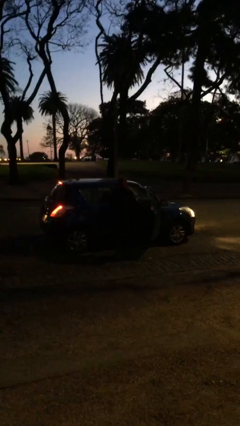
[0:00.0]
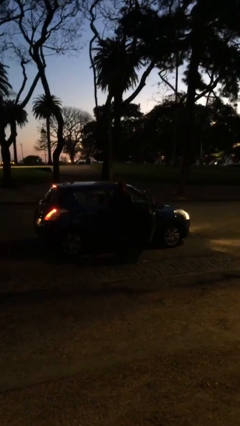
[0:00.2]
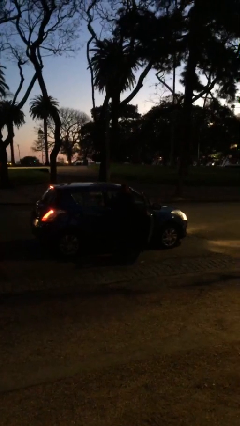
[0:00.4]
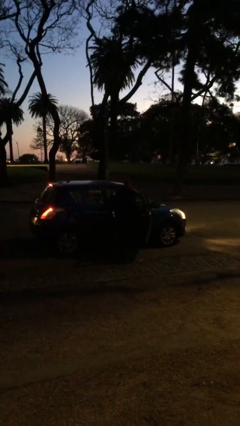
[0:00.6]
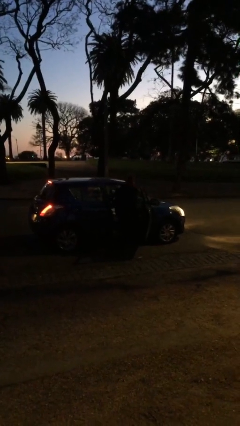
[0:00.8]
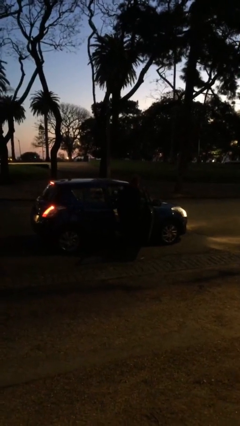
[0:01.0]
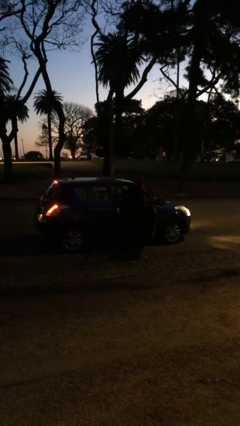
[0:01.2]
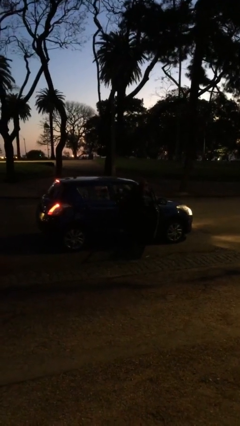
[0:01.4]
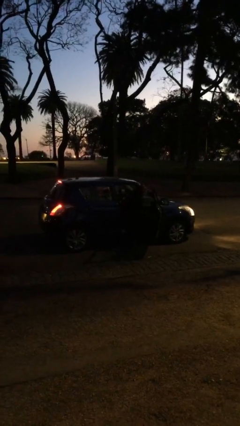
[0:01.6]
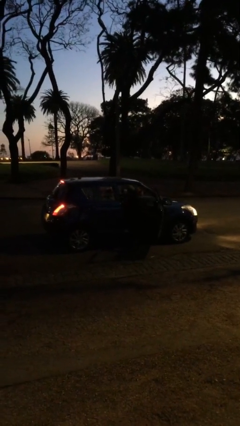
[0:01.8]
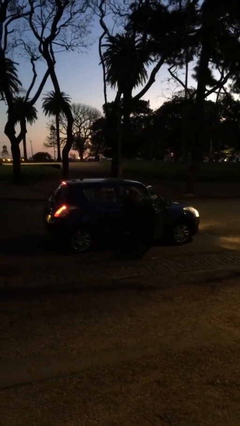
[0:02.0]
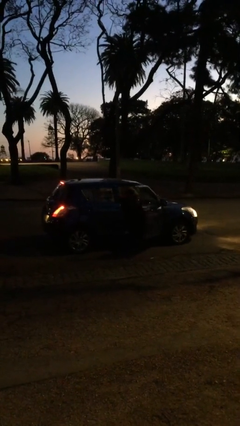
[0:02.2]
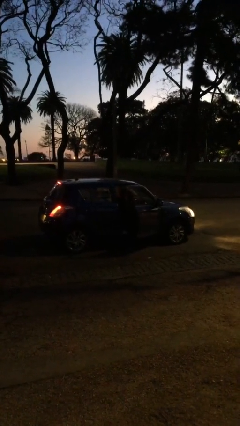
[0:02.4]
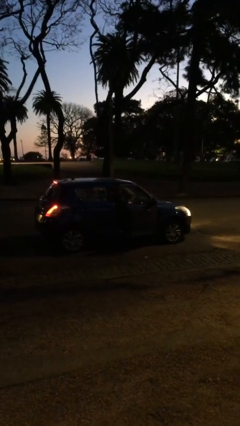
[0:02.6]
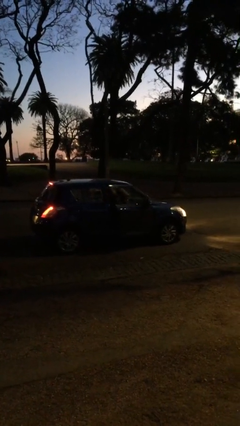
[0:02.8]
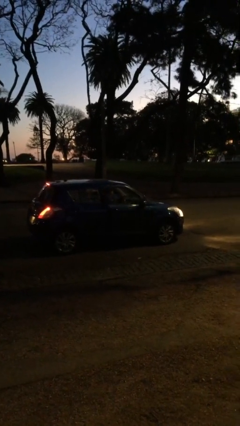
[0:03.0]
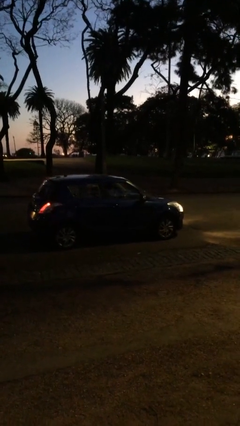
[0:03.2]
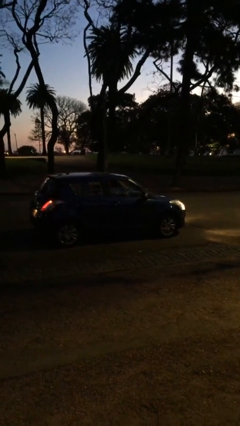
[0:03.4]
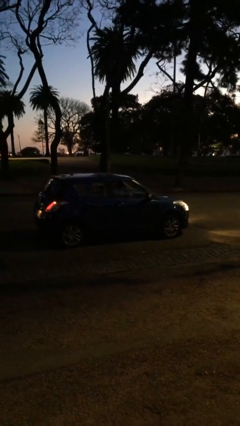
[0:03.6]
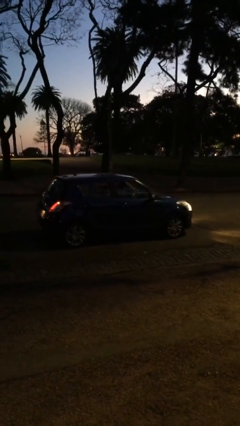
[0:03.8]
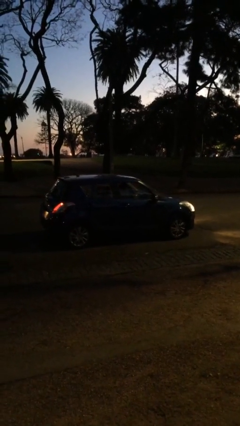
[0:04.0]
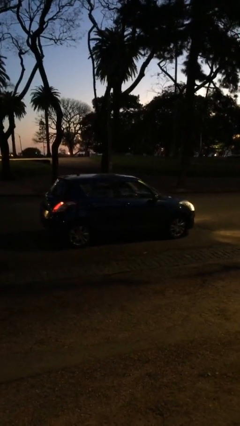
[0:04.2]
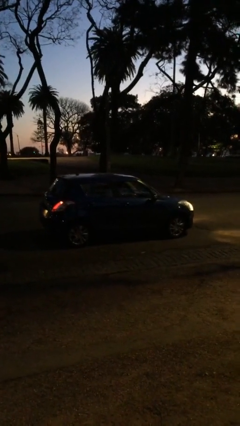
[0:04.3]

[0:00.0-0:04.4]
car picks up person

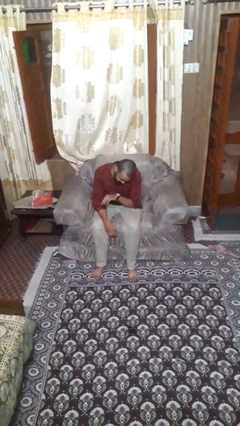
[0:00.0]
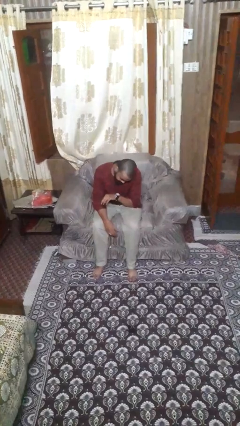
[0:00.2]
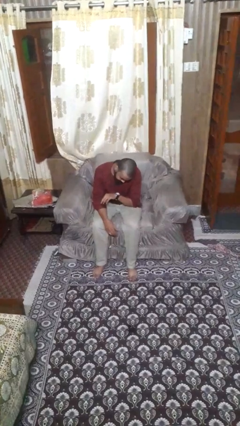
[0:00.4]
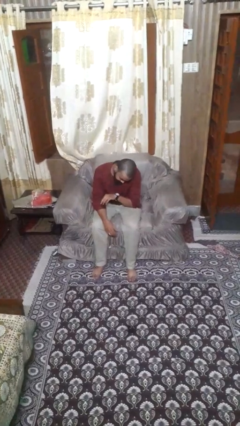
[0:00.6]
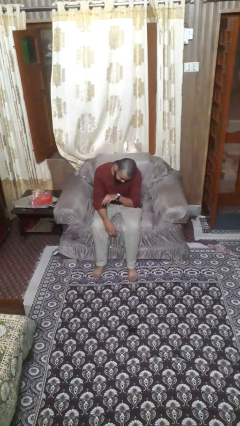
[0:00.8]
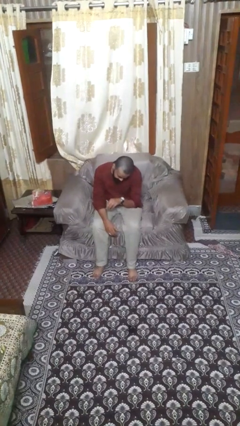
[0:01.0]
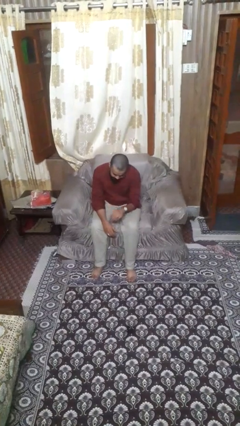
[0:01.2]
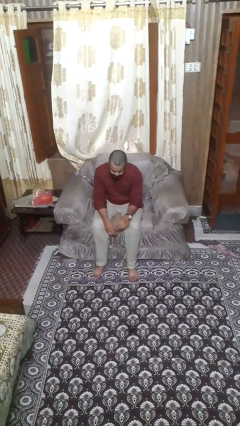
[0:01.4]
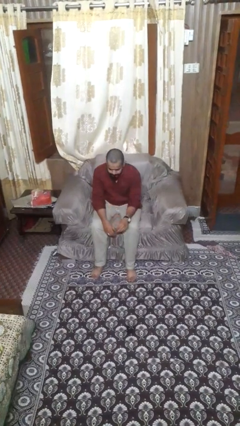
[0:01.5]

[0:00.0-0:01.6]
person looks at wristwatch

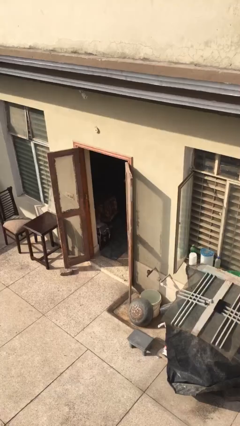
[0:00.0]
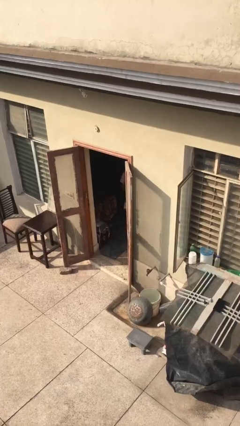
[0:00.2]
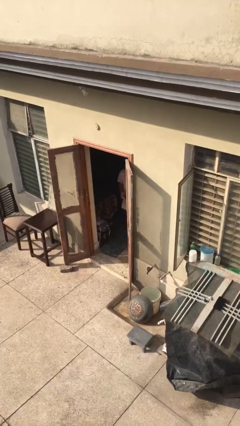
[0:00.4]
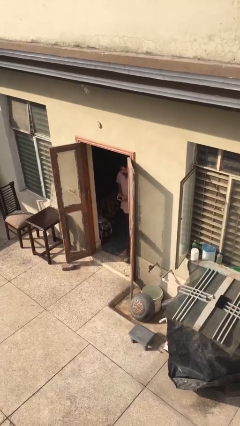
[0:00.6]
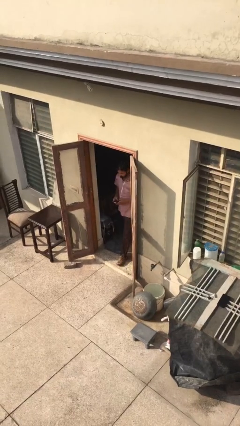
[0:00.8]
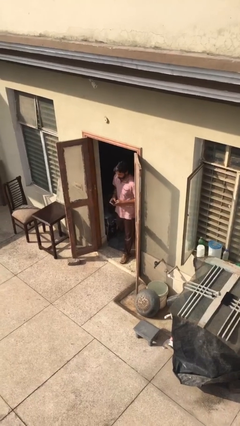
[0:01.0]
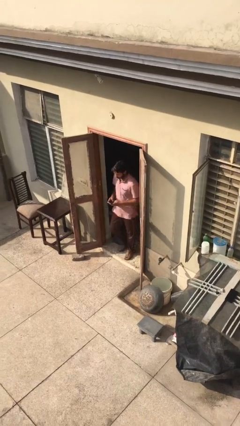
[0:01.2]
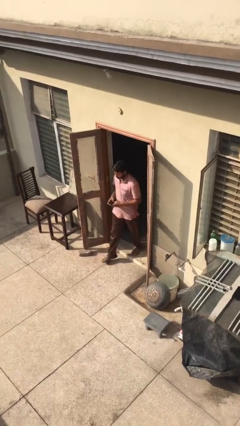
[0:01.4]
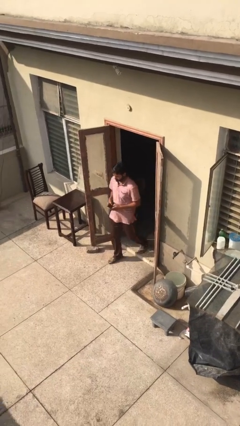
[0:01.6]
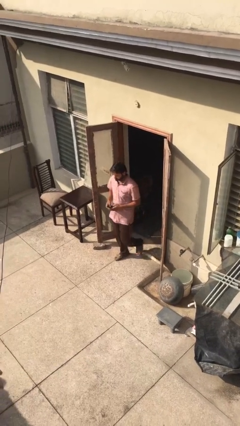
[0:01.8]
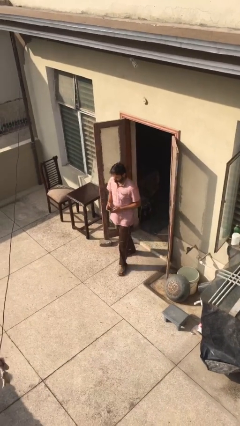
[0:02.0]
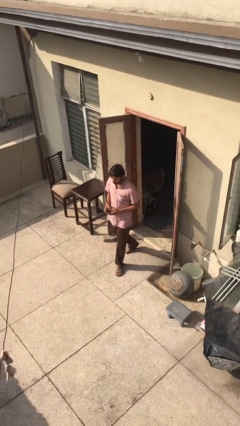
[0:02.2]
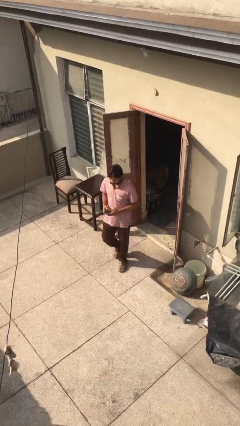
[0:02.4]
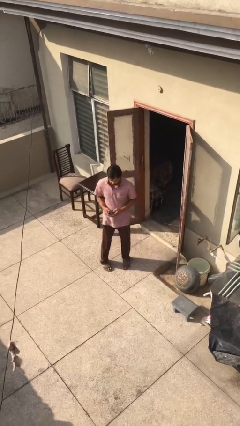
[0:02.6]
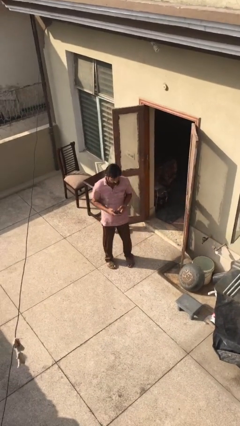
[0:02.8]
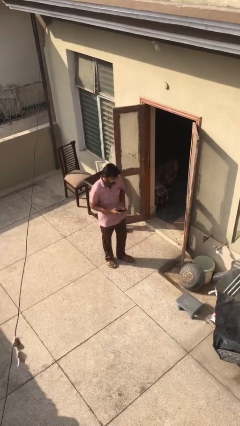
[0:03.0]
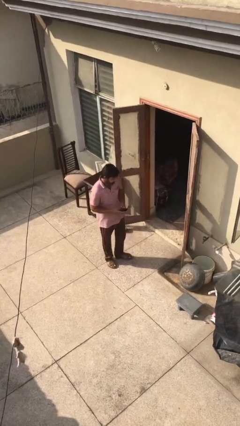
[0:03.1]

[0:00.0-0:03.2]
person enters scene through structure

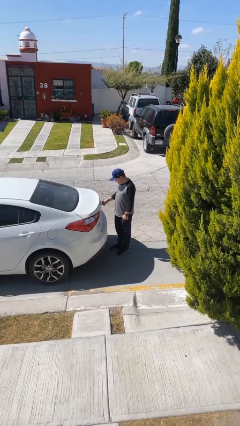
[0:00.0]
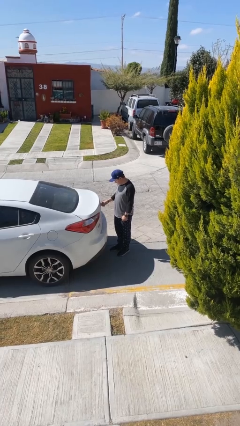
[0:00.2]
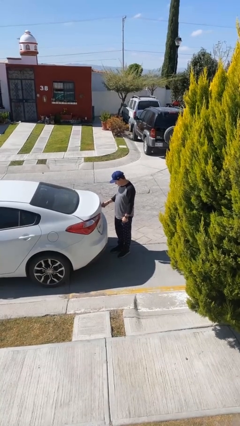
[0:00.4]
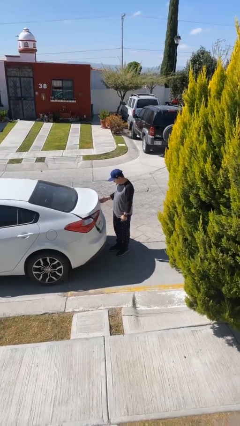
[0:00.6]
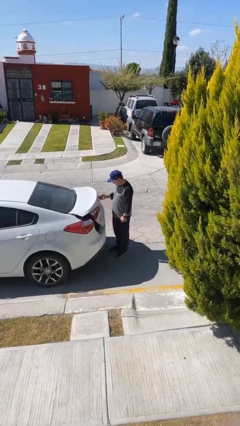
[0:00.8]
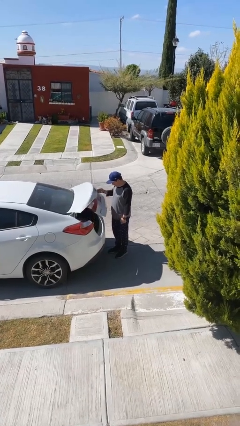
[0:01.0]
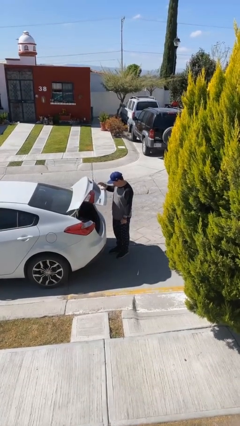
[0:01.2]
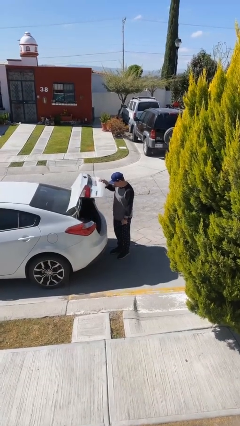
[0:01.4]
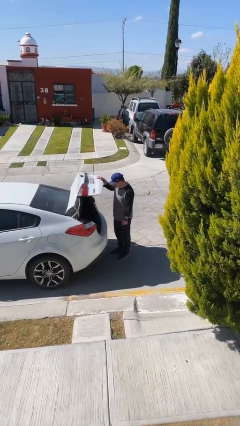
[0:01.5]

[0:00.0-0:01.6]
person opens car trunk

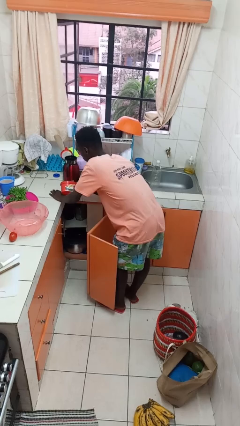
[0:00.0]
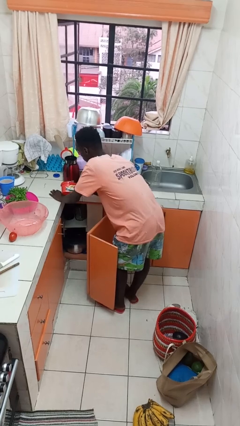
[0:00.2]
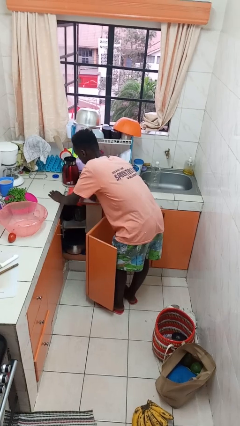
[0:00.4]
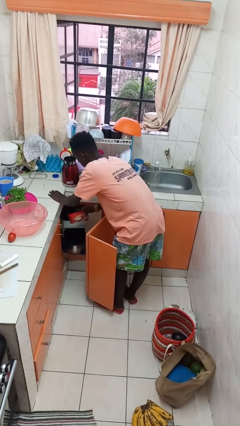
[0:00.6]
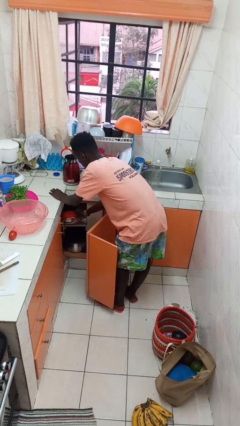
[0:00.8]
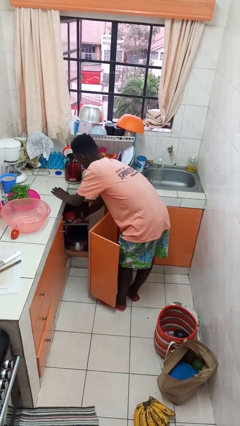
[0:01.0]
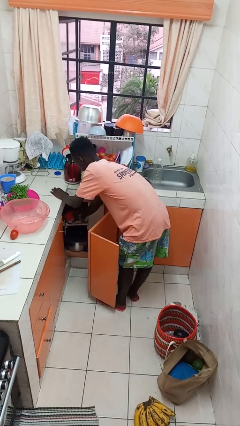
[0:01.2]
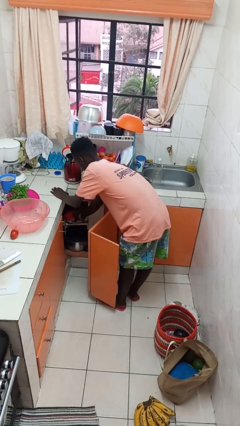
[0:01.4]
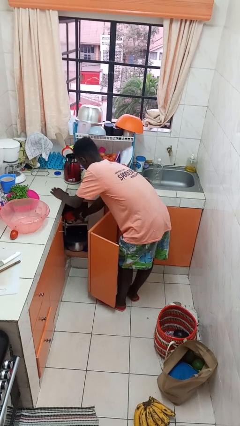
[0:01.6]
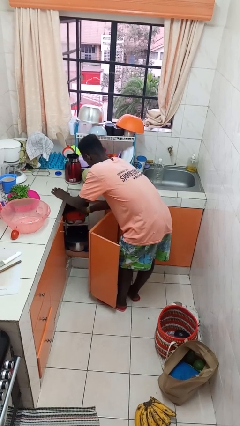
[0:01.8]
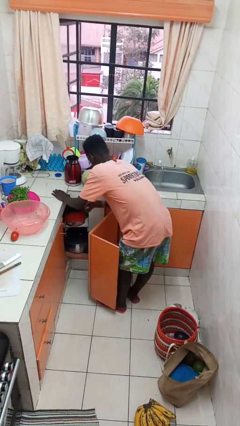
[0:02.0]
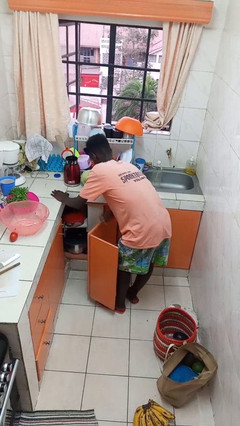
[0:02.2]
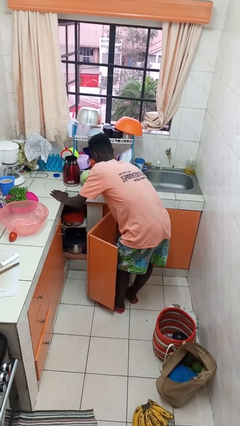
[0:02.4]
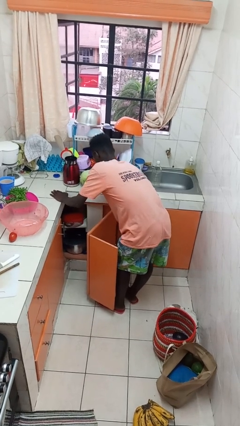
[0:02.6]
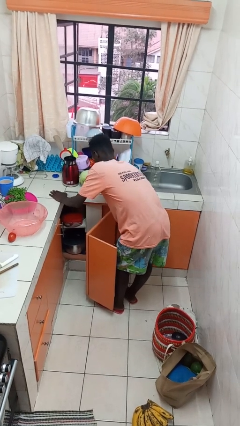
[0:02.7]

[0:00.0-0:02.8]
person puts object in cabinet

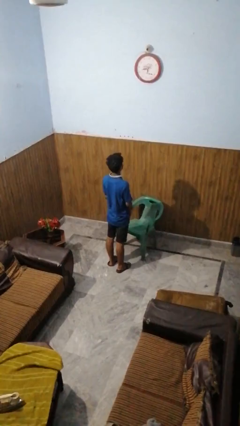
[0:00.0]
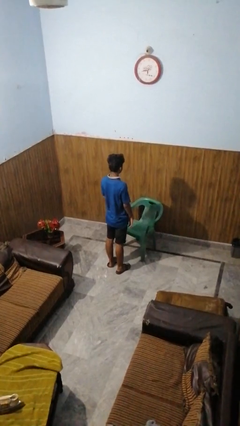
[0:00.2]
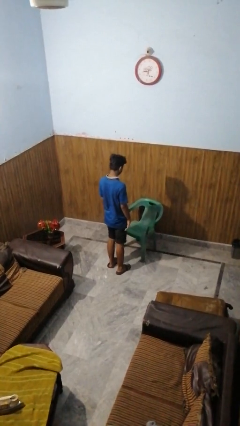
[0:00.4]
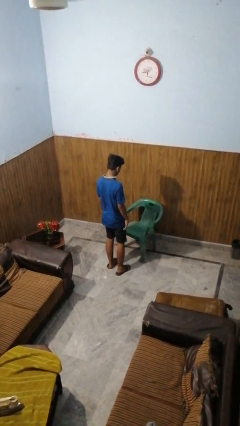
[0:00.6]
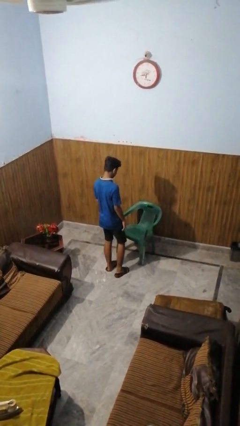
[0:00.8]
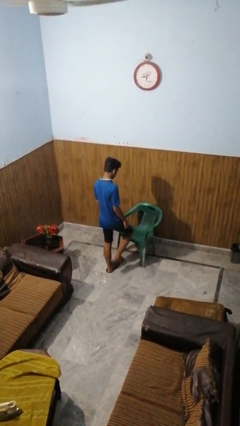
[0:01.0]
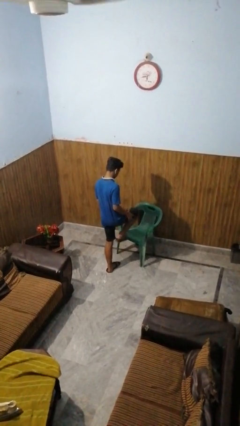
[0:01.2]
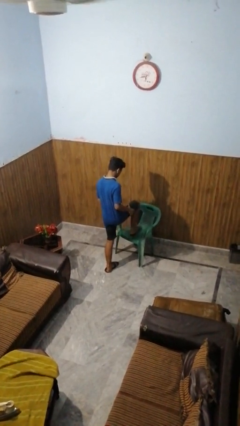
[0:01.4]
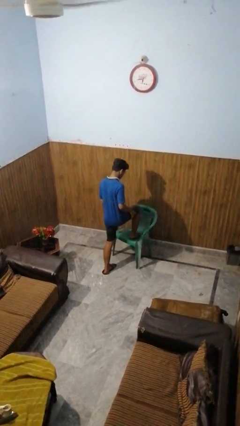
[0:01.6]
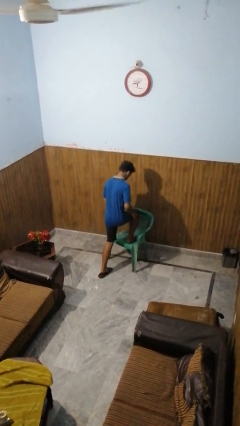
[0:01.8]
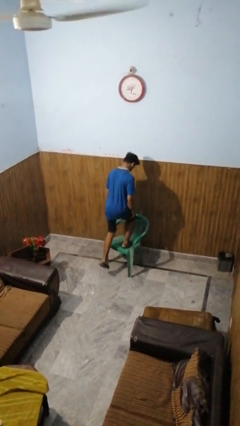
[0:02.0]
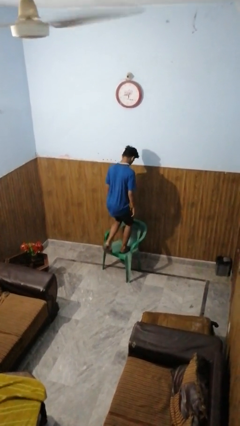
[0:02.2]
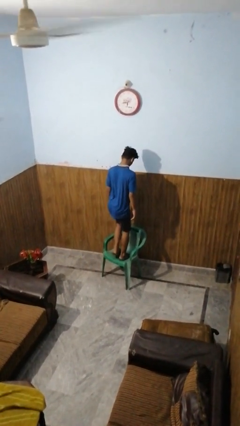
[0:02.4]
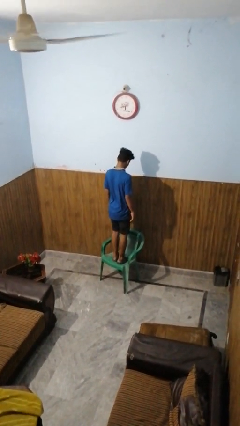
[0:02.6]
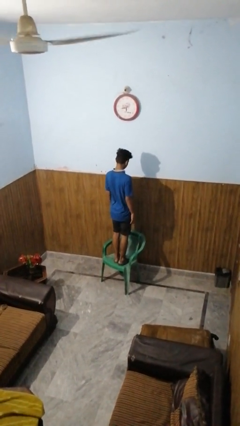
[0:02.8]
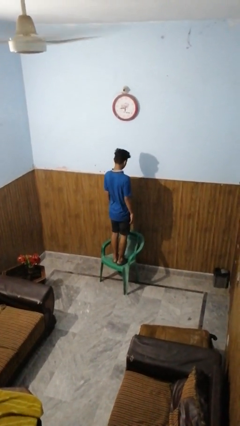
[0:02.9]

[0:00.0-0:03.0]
person climbs on chair

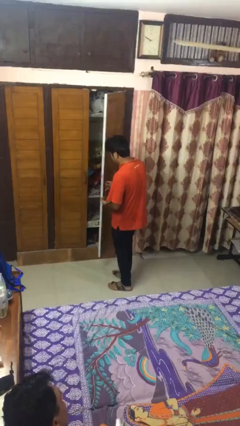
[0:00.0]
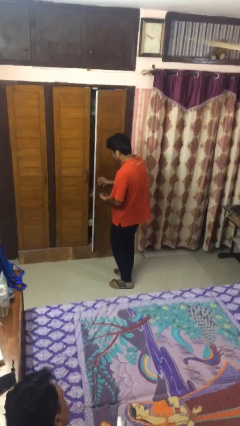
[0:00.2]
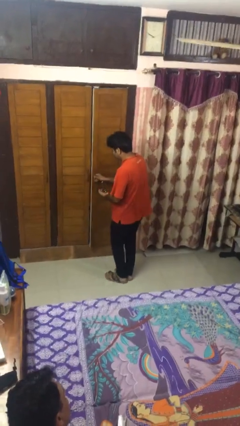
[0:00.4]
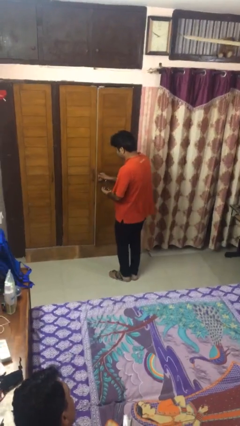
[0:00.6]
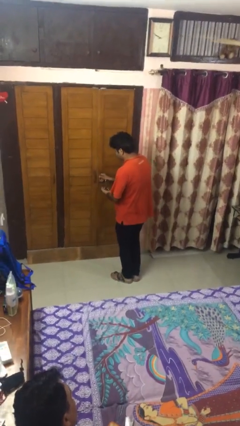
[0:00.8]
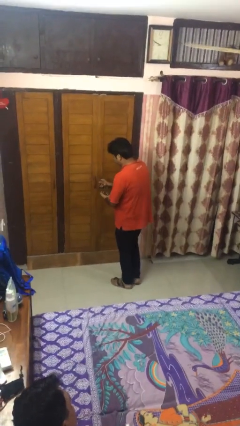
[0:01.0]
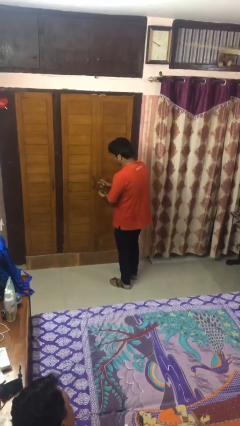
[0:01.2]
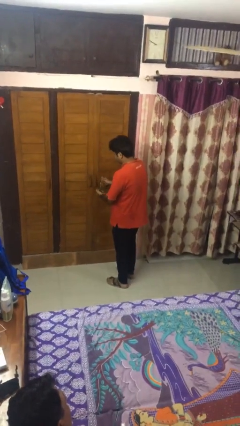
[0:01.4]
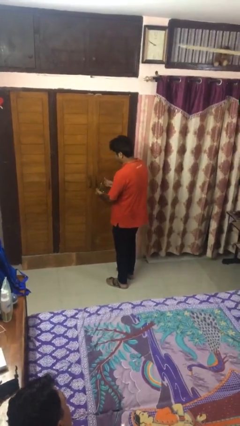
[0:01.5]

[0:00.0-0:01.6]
person closes facility door
